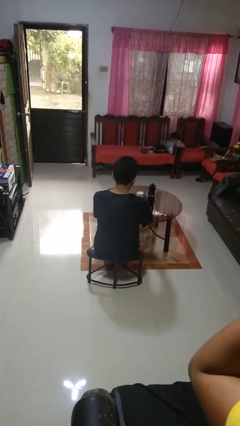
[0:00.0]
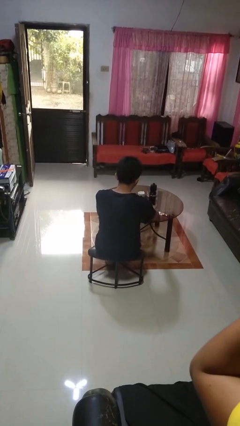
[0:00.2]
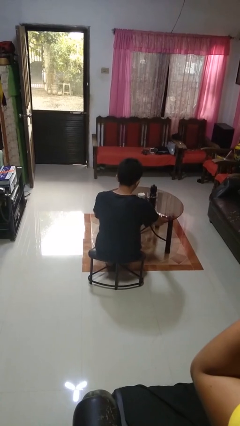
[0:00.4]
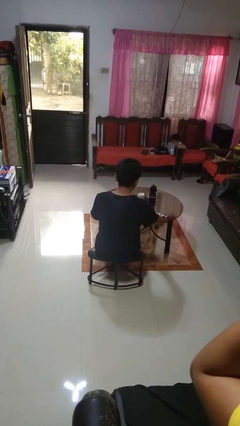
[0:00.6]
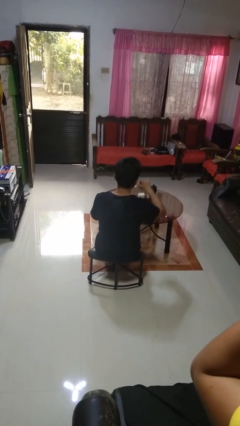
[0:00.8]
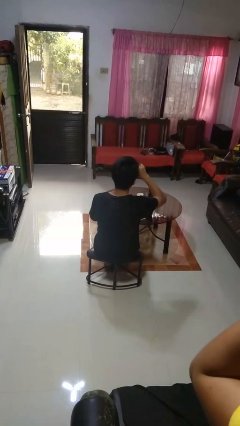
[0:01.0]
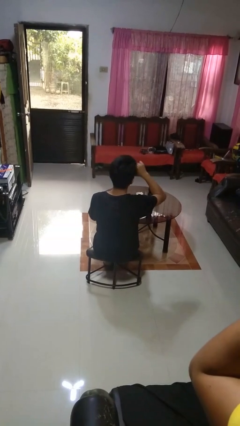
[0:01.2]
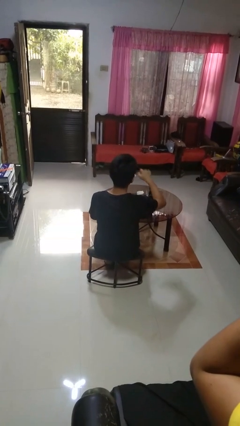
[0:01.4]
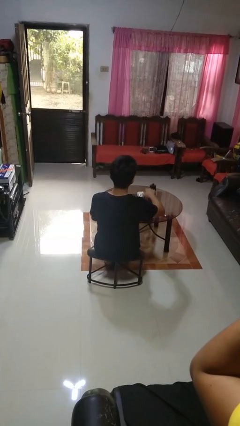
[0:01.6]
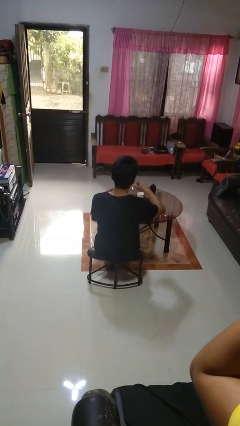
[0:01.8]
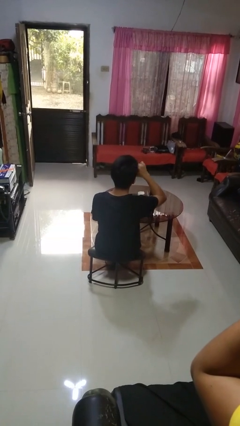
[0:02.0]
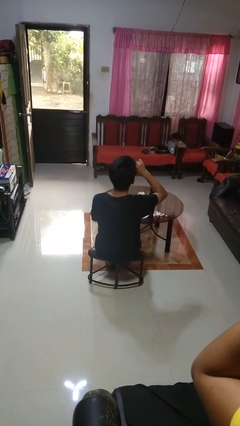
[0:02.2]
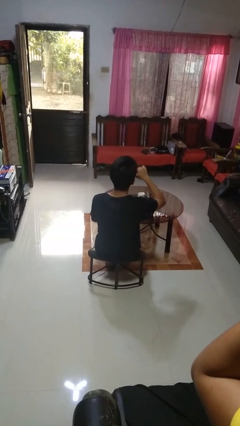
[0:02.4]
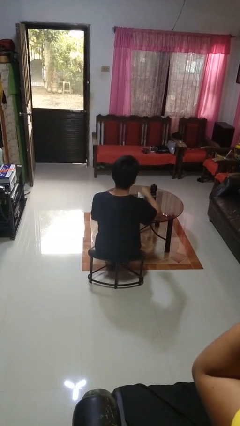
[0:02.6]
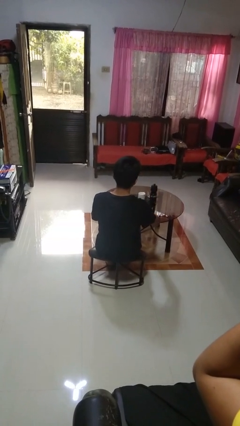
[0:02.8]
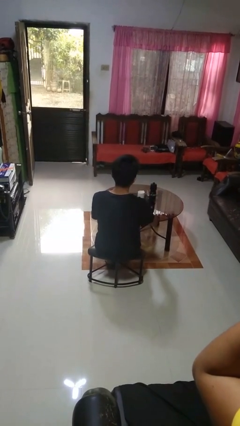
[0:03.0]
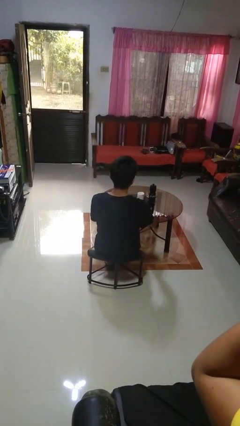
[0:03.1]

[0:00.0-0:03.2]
person eats with utensil

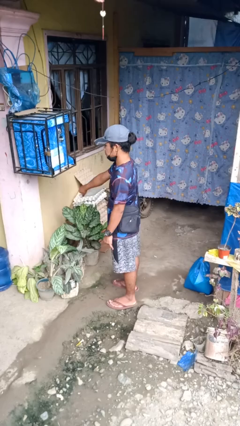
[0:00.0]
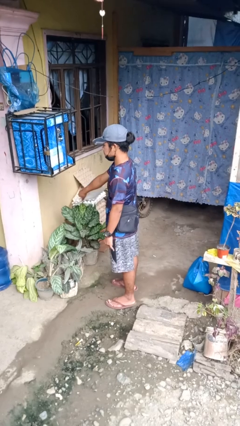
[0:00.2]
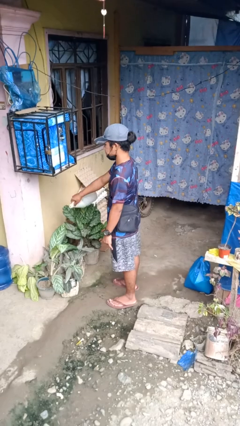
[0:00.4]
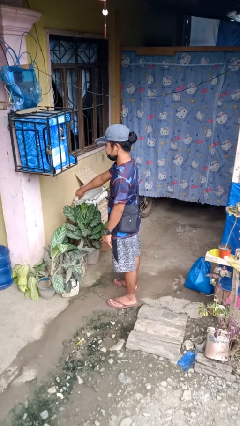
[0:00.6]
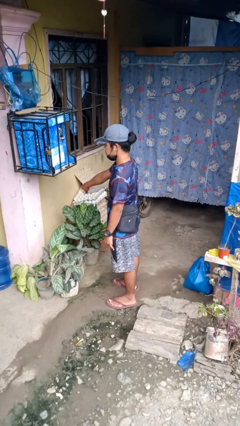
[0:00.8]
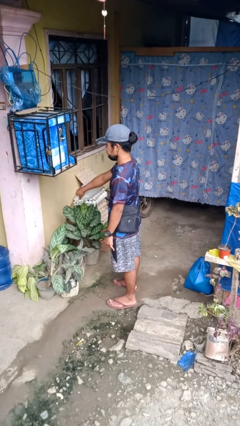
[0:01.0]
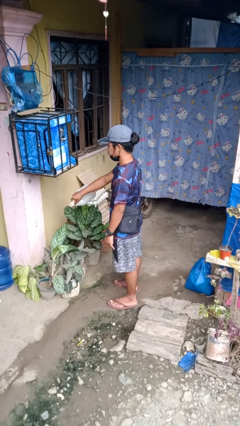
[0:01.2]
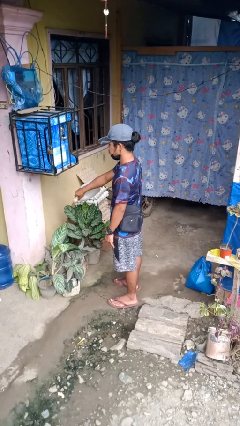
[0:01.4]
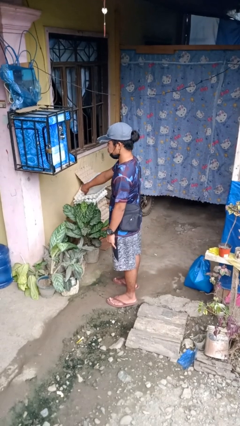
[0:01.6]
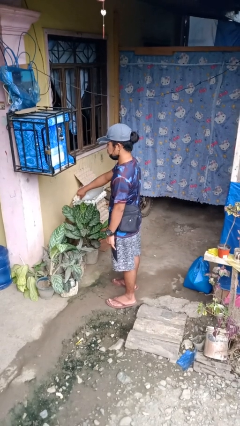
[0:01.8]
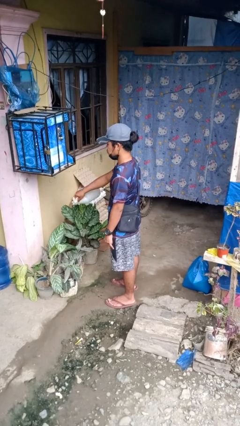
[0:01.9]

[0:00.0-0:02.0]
person waters houseplant

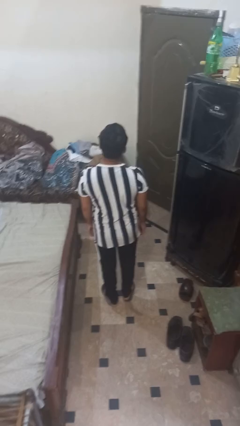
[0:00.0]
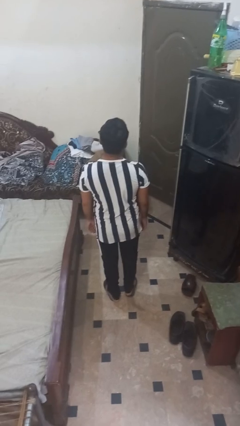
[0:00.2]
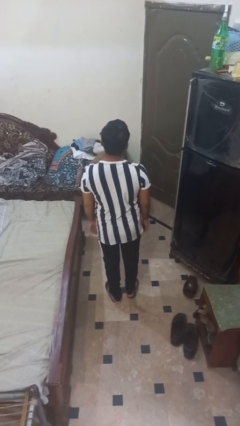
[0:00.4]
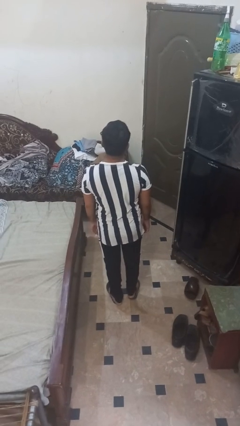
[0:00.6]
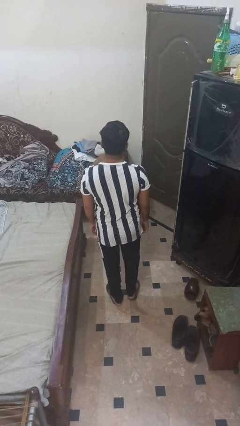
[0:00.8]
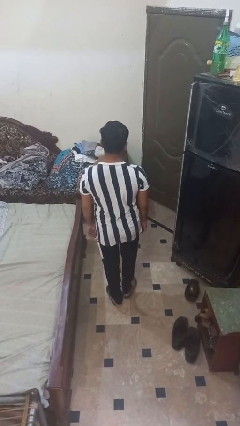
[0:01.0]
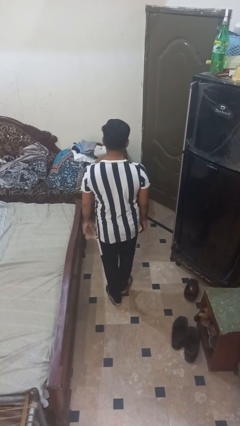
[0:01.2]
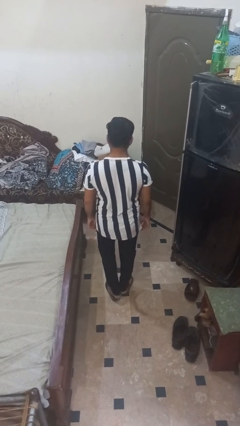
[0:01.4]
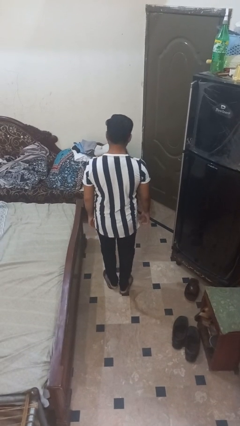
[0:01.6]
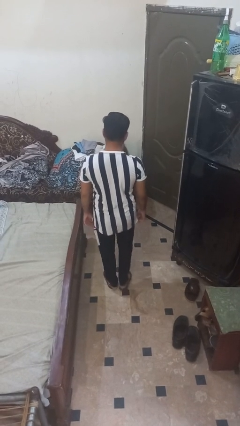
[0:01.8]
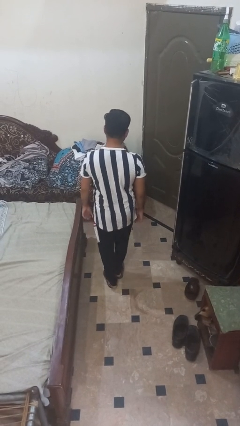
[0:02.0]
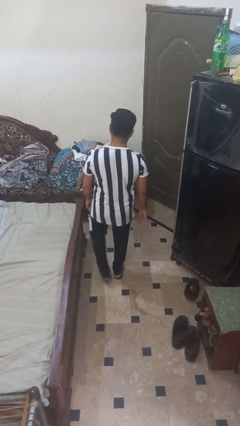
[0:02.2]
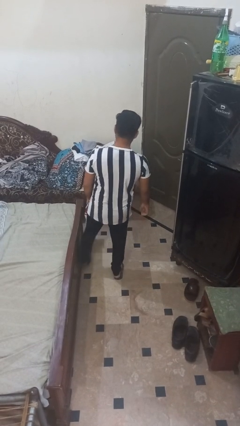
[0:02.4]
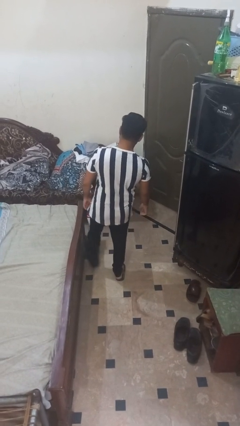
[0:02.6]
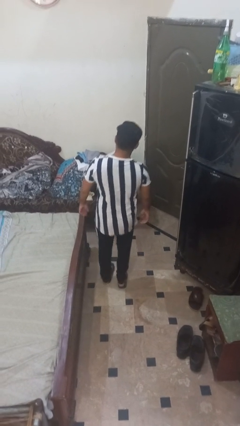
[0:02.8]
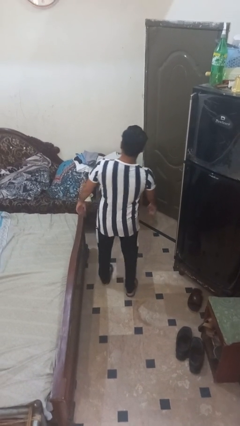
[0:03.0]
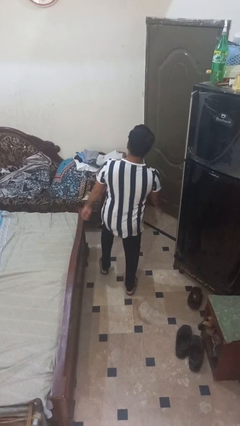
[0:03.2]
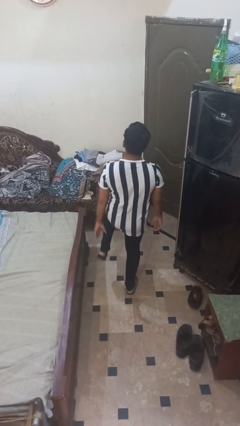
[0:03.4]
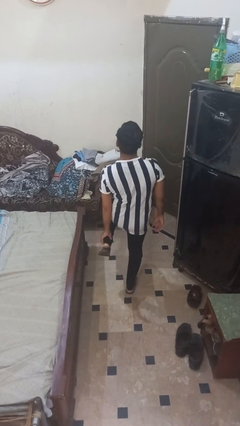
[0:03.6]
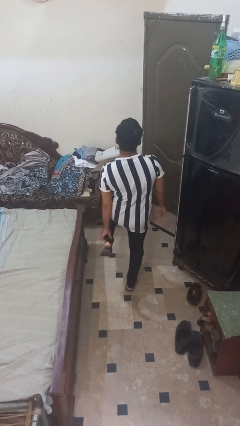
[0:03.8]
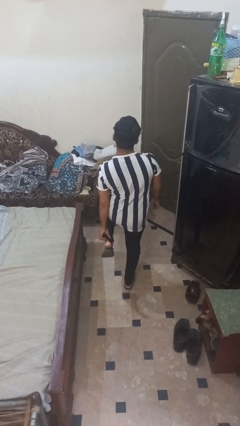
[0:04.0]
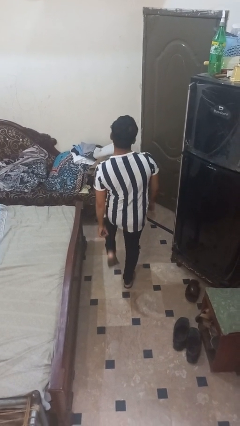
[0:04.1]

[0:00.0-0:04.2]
person stubs toe

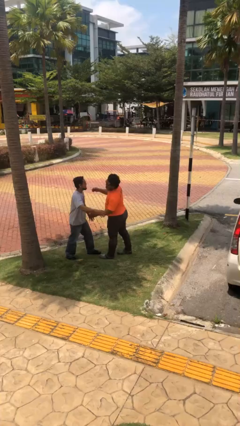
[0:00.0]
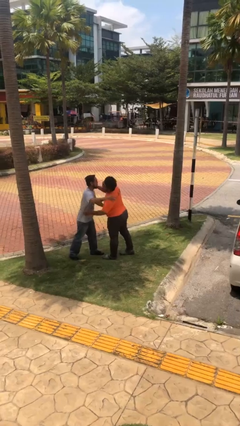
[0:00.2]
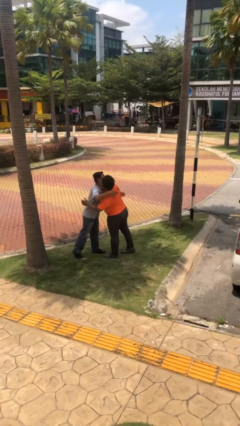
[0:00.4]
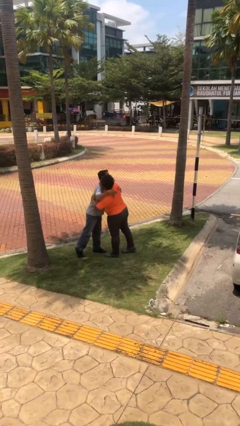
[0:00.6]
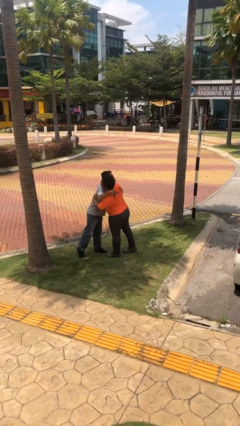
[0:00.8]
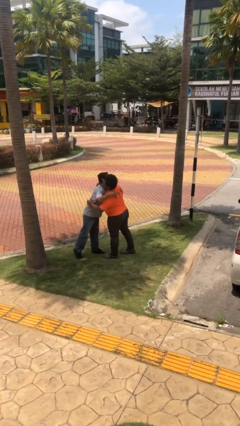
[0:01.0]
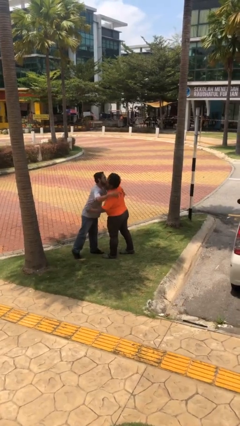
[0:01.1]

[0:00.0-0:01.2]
person embraces person

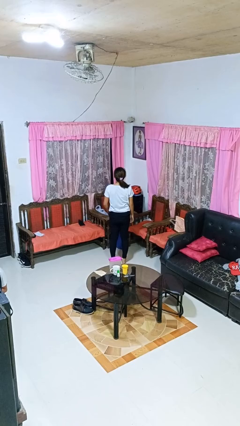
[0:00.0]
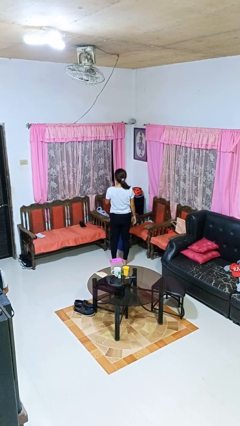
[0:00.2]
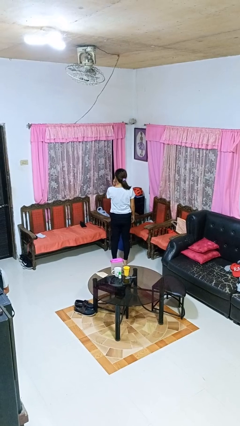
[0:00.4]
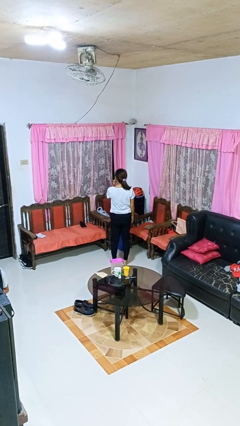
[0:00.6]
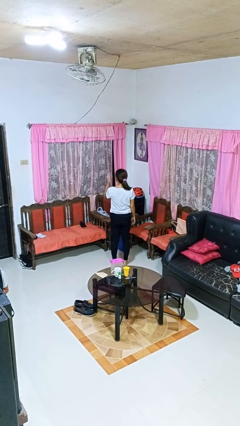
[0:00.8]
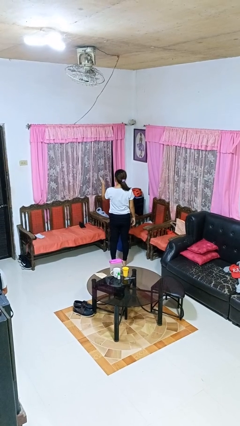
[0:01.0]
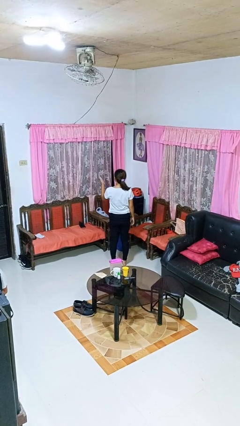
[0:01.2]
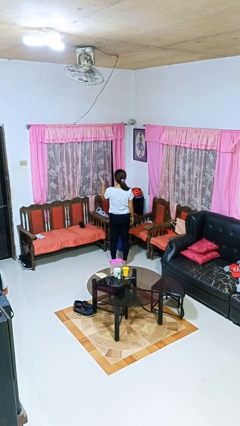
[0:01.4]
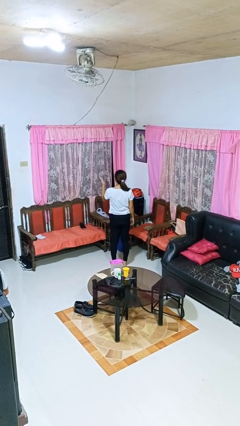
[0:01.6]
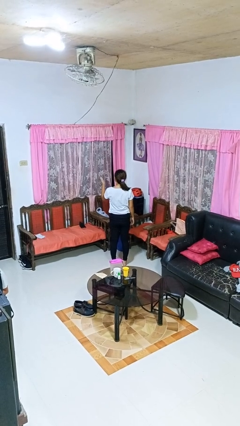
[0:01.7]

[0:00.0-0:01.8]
person gestures blow kiss

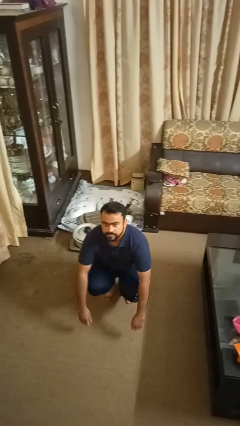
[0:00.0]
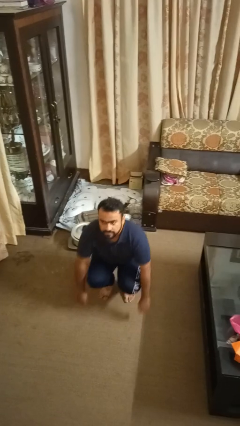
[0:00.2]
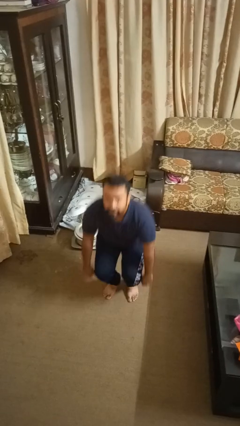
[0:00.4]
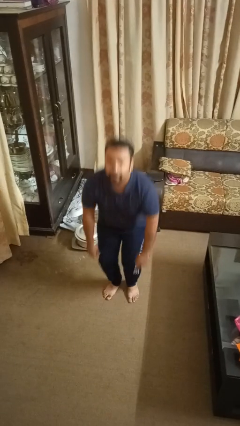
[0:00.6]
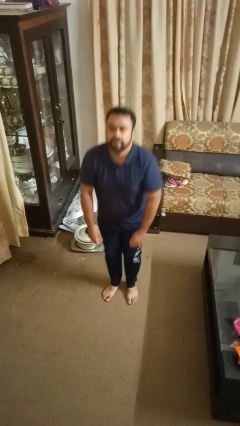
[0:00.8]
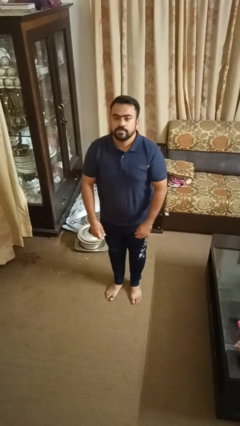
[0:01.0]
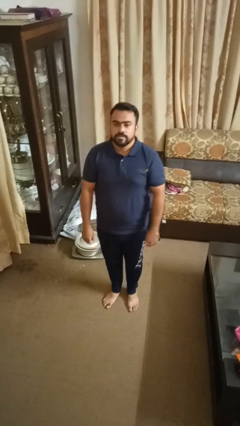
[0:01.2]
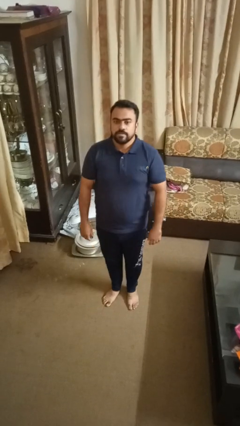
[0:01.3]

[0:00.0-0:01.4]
person stands up

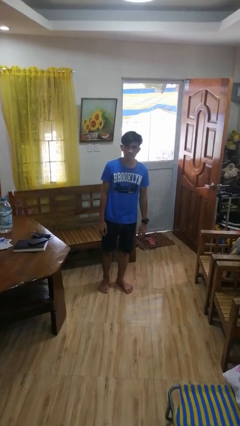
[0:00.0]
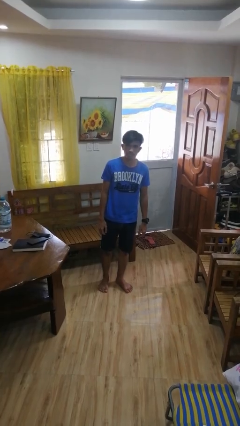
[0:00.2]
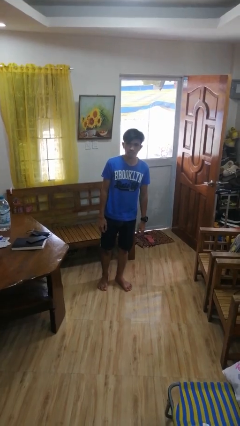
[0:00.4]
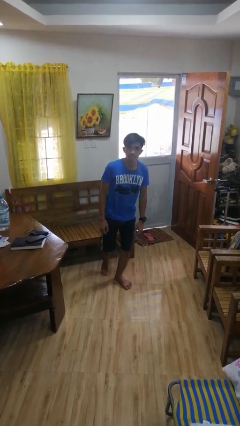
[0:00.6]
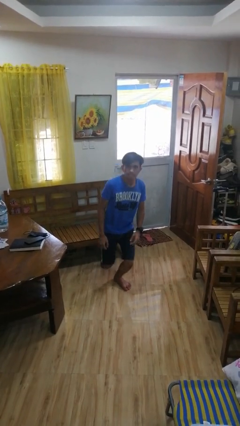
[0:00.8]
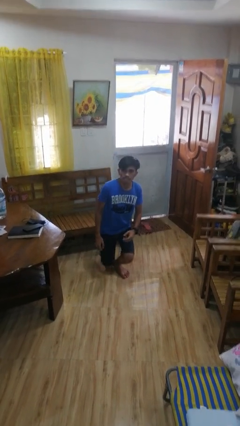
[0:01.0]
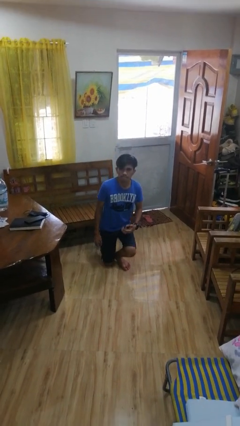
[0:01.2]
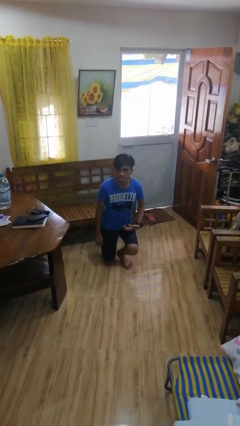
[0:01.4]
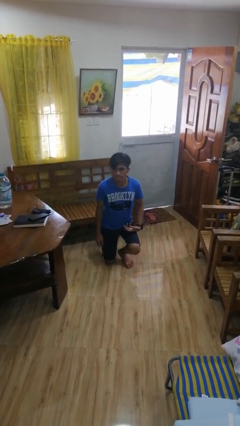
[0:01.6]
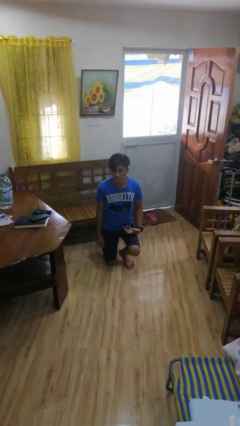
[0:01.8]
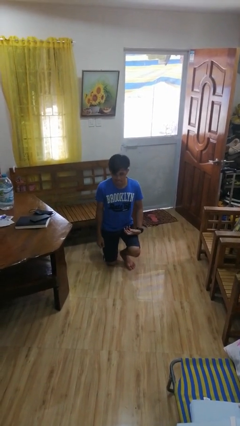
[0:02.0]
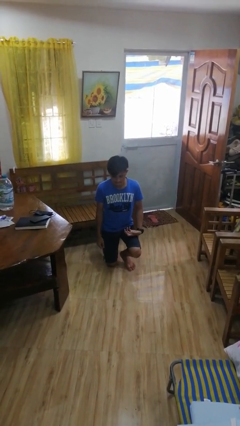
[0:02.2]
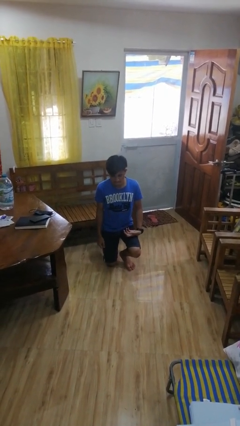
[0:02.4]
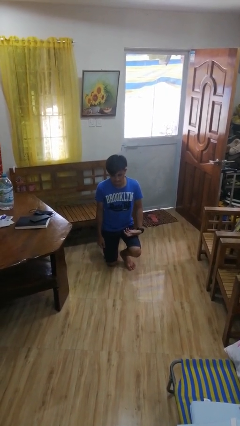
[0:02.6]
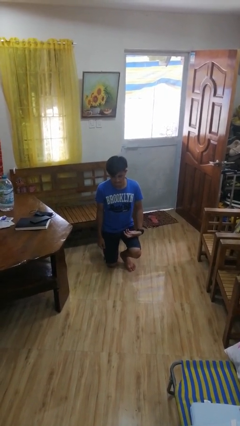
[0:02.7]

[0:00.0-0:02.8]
person kneels

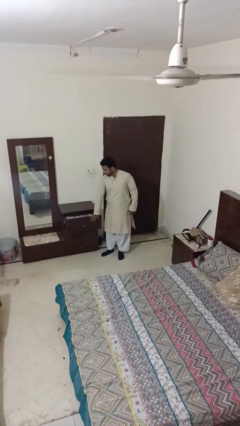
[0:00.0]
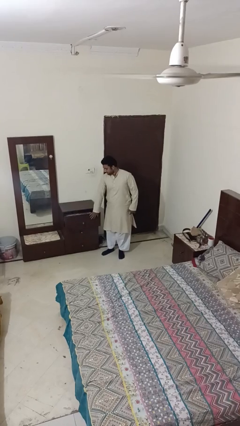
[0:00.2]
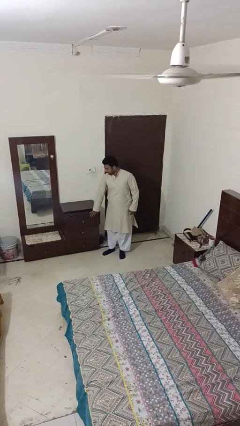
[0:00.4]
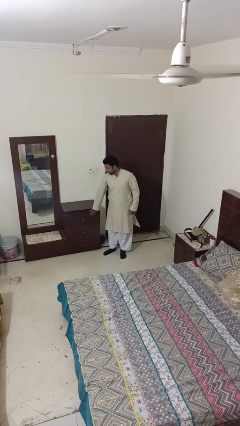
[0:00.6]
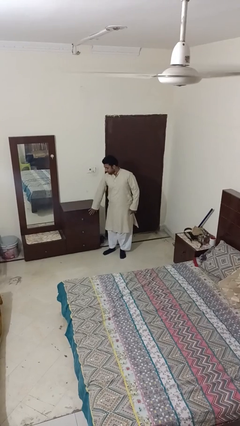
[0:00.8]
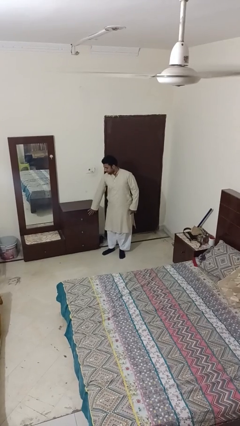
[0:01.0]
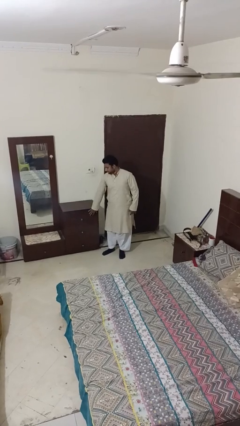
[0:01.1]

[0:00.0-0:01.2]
person closes dresser drawer
